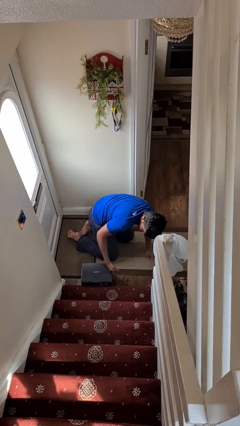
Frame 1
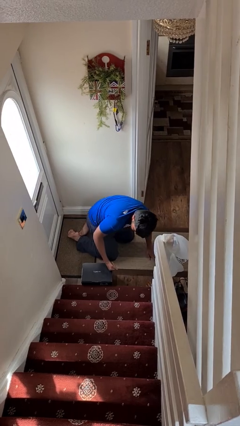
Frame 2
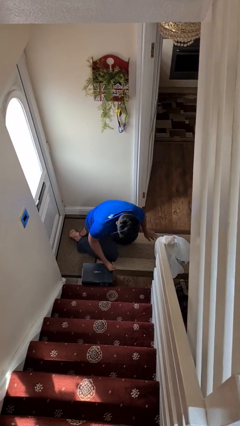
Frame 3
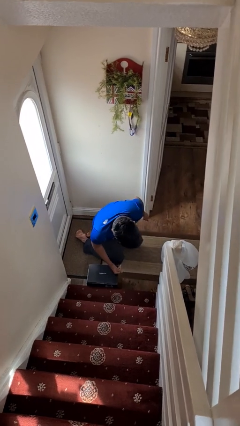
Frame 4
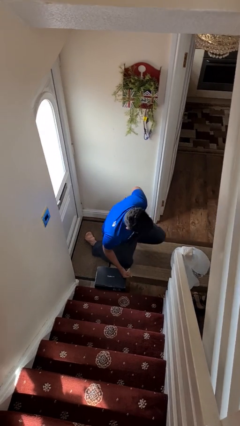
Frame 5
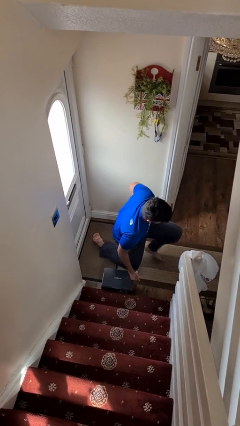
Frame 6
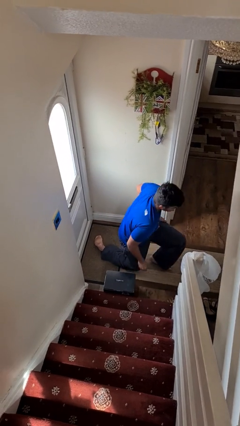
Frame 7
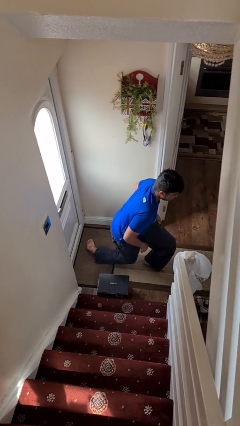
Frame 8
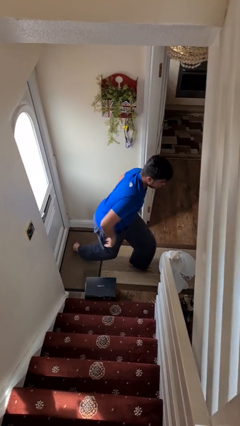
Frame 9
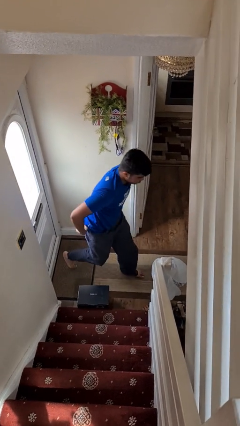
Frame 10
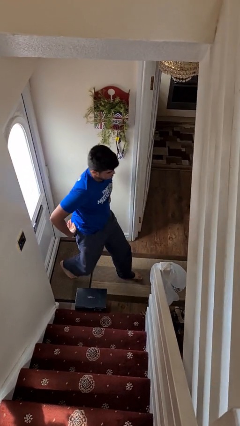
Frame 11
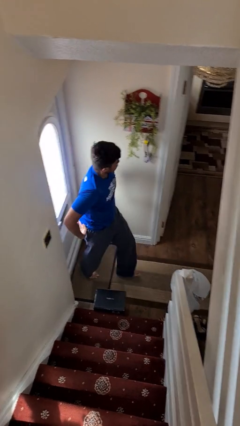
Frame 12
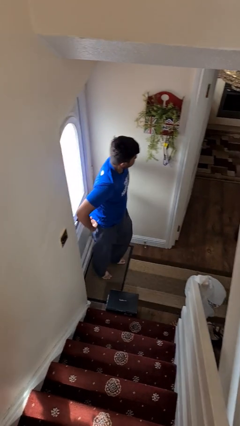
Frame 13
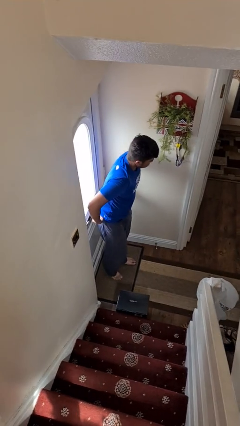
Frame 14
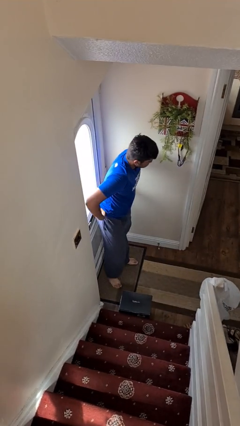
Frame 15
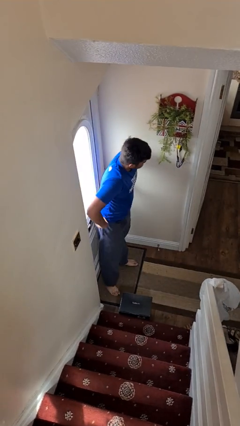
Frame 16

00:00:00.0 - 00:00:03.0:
person stands up from floor

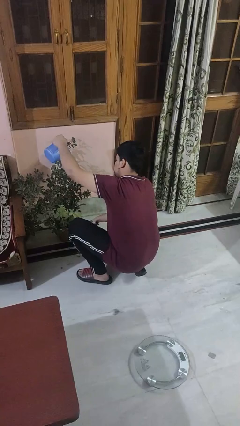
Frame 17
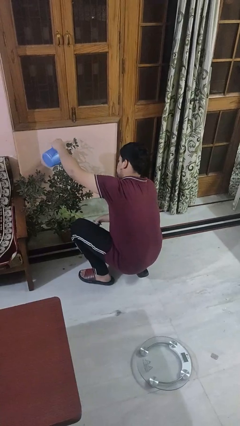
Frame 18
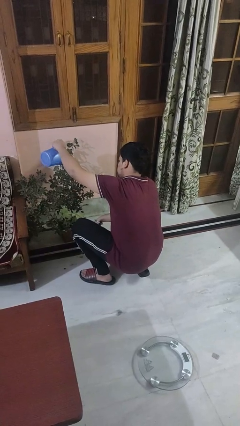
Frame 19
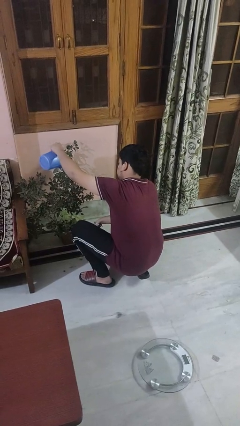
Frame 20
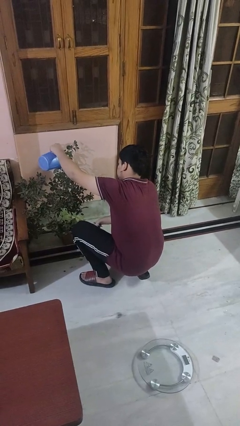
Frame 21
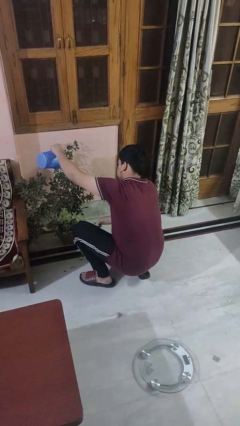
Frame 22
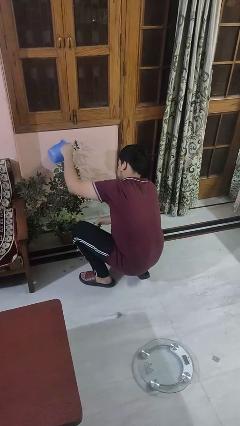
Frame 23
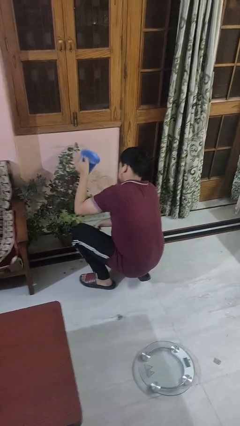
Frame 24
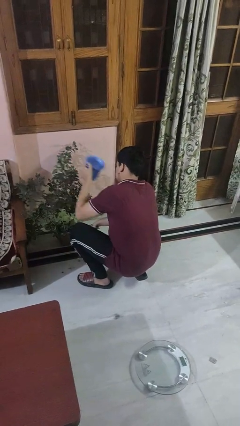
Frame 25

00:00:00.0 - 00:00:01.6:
person waters houseplant

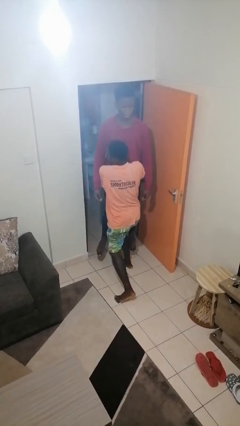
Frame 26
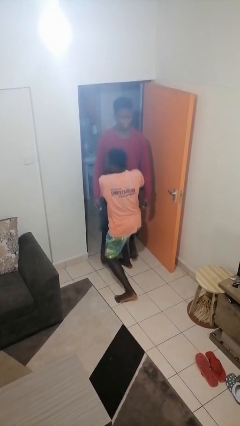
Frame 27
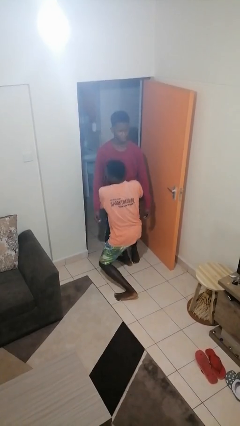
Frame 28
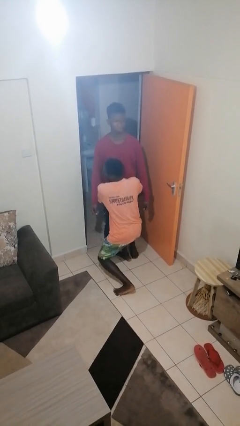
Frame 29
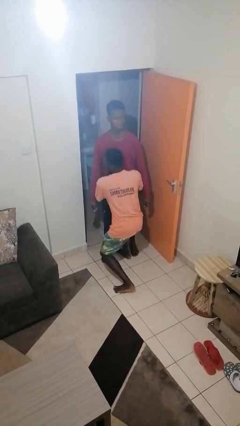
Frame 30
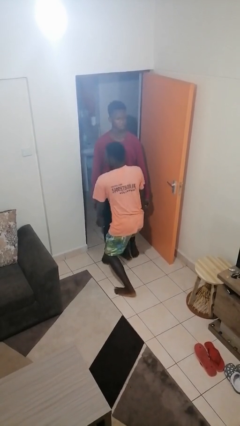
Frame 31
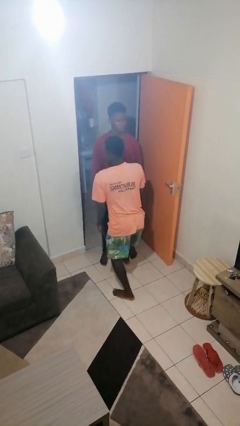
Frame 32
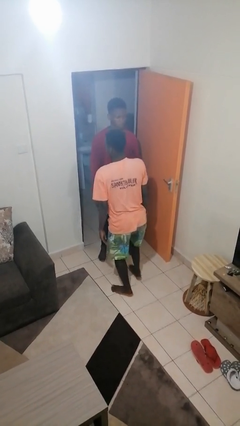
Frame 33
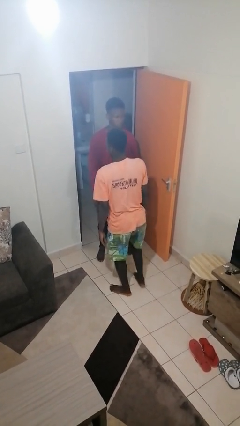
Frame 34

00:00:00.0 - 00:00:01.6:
person puts down person

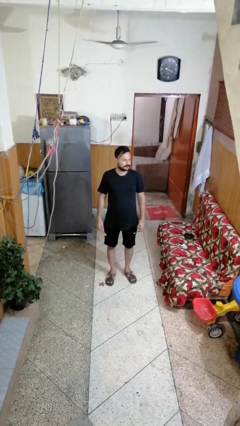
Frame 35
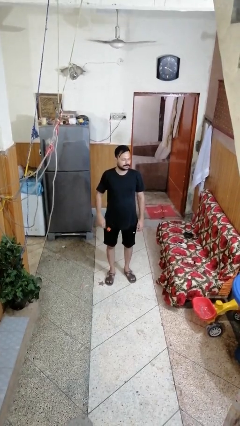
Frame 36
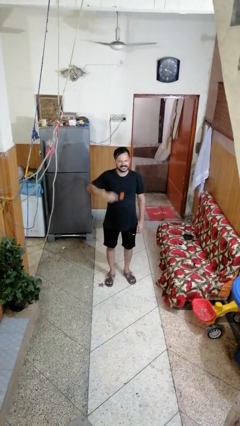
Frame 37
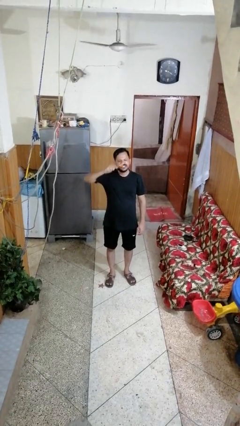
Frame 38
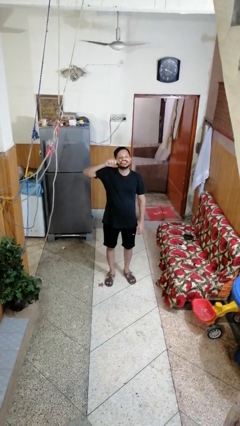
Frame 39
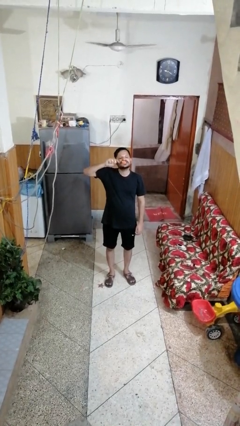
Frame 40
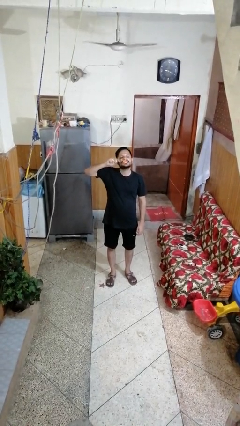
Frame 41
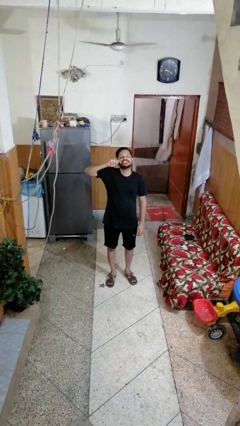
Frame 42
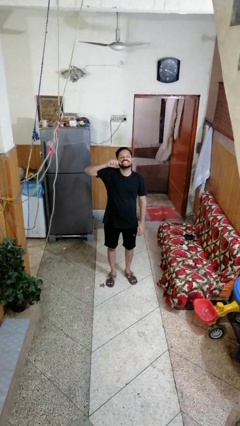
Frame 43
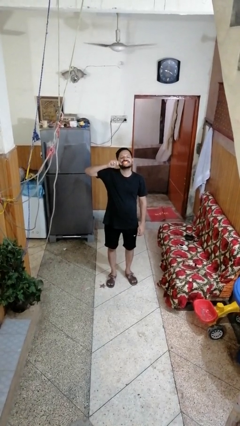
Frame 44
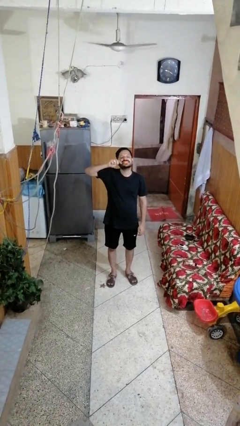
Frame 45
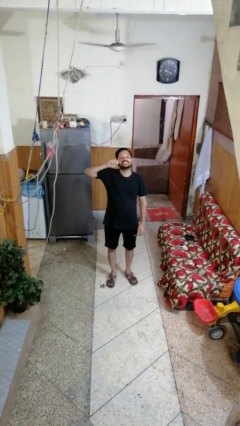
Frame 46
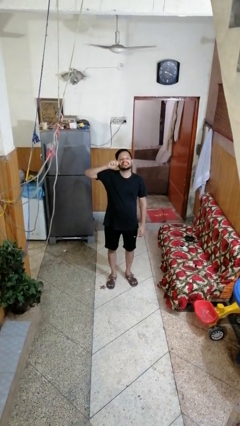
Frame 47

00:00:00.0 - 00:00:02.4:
person brushes teeth

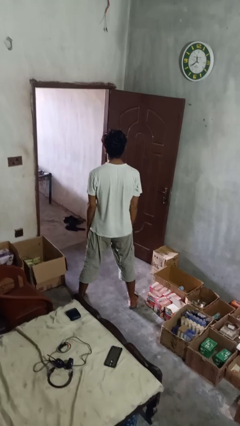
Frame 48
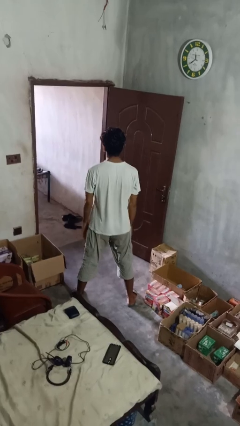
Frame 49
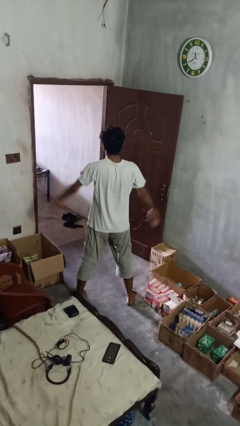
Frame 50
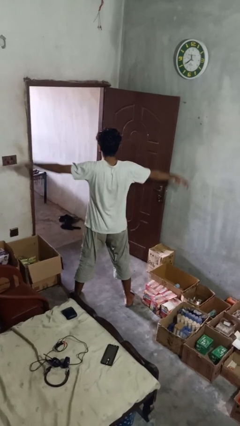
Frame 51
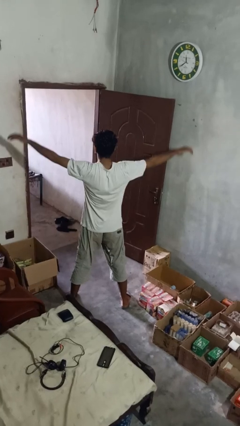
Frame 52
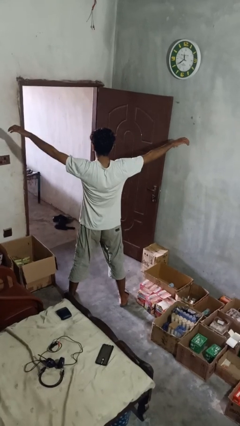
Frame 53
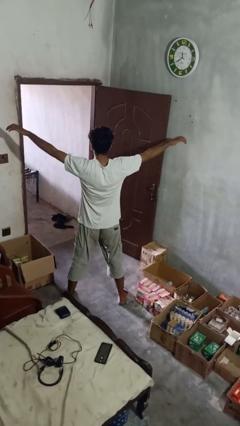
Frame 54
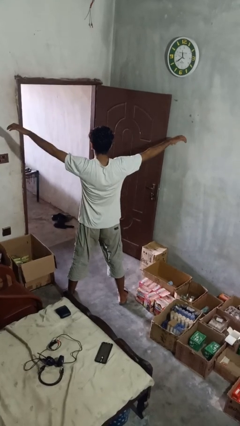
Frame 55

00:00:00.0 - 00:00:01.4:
person stretches arms to side

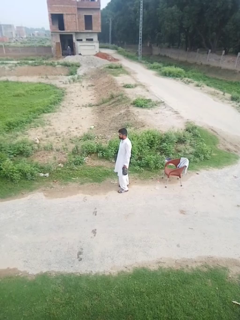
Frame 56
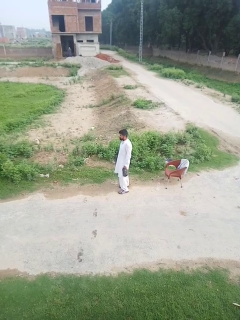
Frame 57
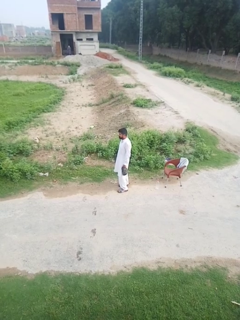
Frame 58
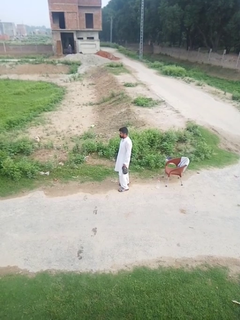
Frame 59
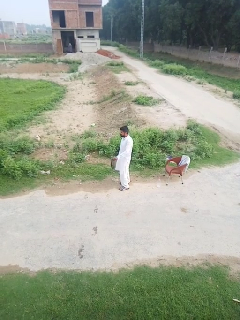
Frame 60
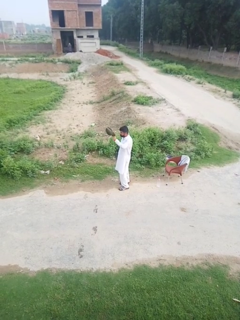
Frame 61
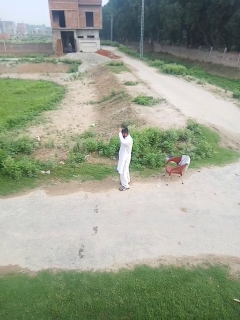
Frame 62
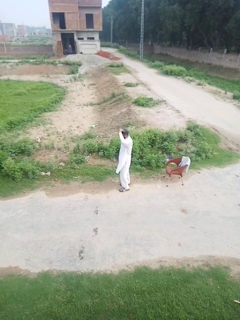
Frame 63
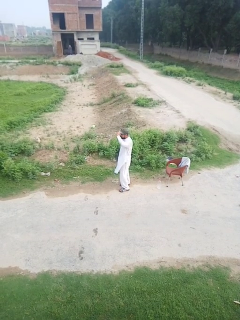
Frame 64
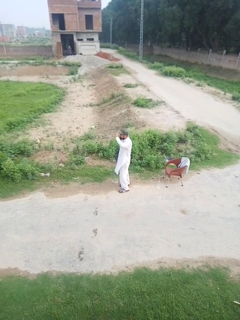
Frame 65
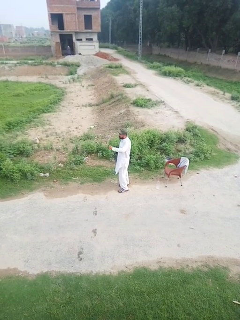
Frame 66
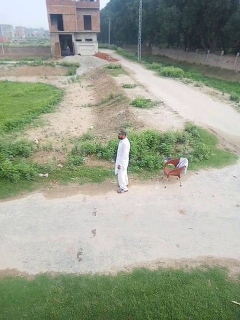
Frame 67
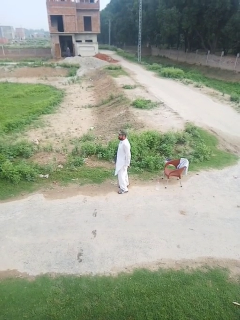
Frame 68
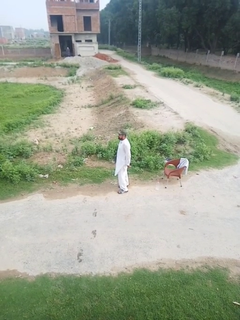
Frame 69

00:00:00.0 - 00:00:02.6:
person puts on hat

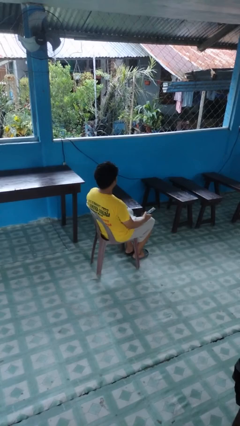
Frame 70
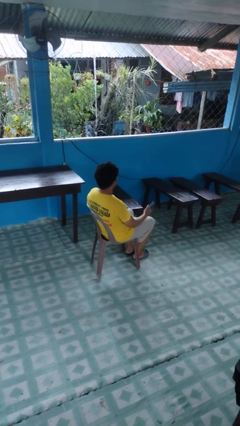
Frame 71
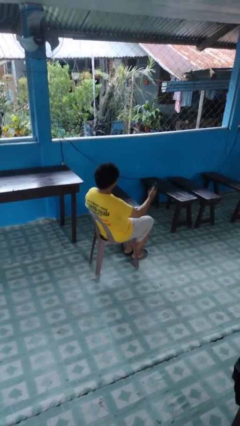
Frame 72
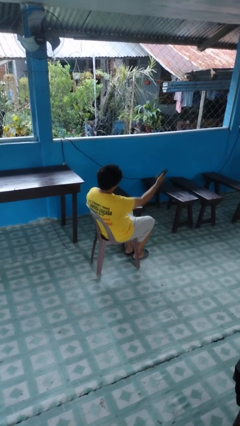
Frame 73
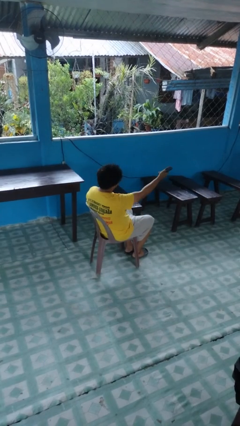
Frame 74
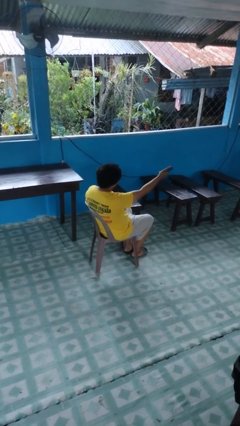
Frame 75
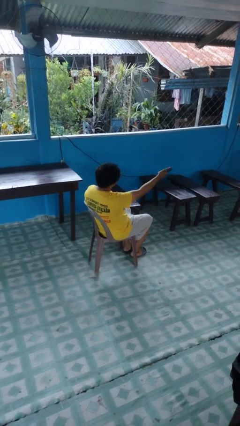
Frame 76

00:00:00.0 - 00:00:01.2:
person uses television remote

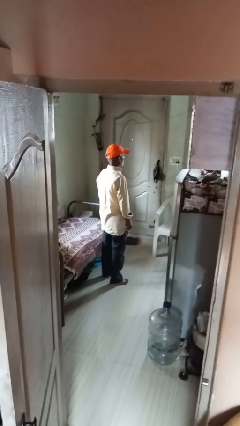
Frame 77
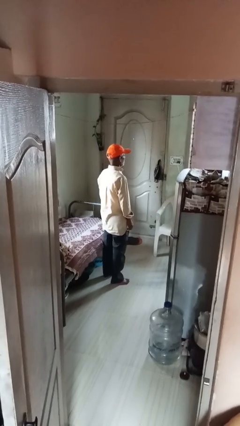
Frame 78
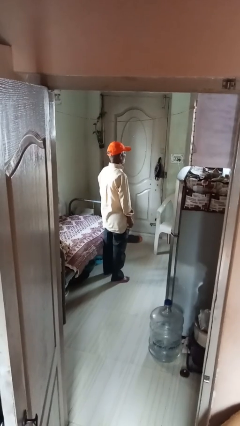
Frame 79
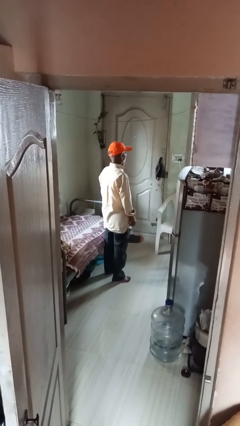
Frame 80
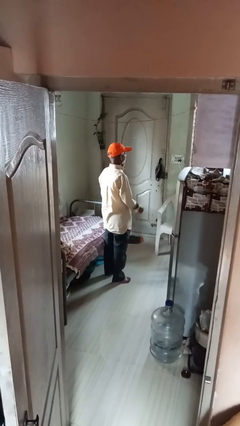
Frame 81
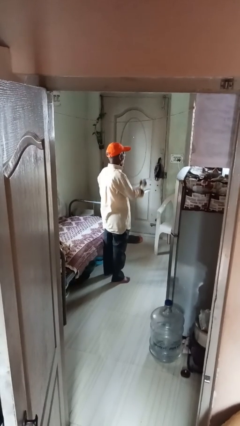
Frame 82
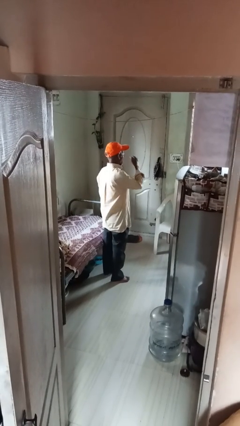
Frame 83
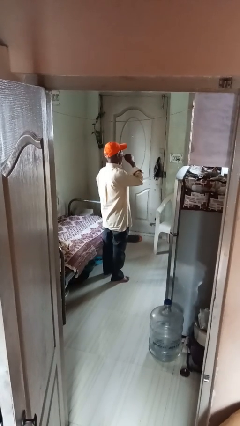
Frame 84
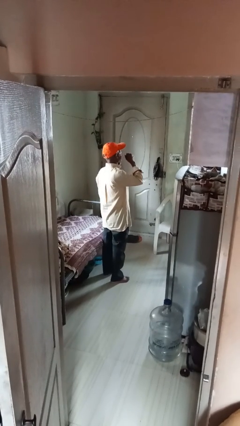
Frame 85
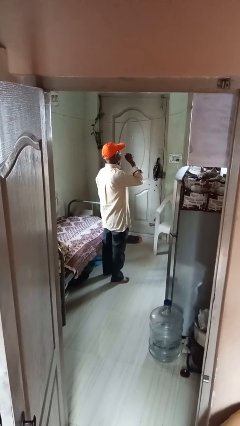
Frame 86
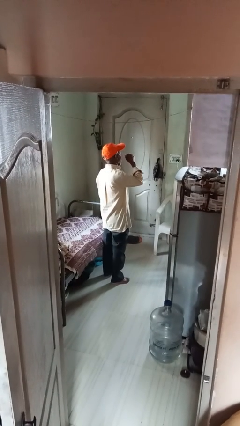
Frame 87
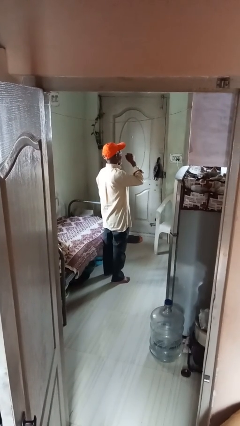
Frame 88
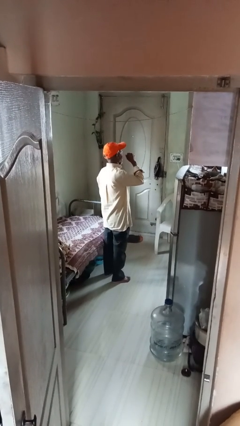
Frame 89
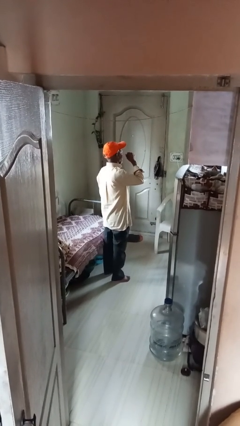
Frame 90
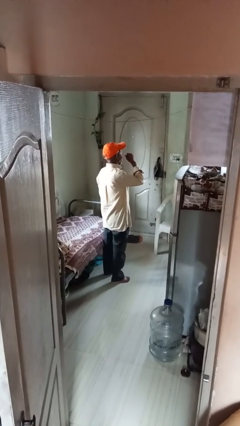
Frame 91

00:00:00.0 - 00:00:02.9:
person yawns

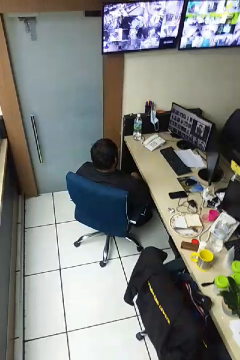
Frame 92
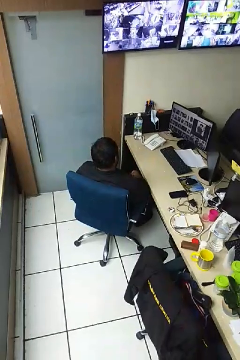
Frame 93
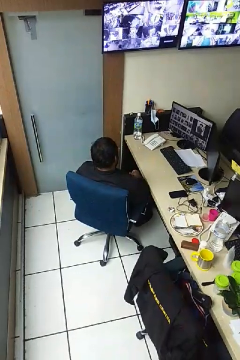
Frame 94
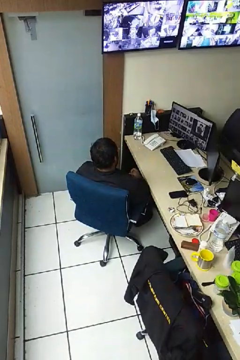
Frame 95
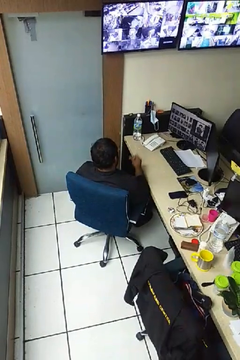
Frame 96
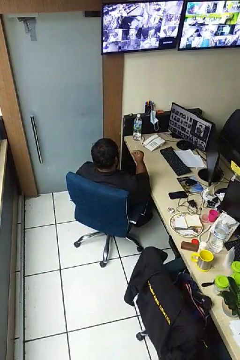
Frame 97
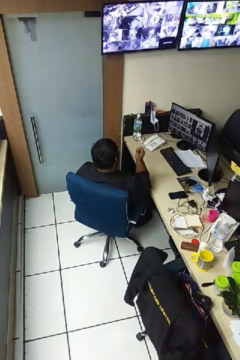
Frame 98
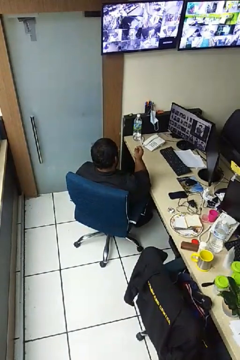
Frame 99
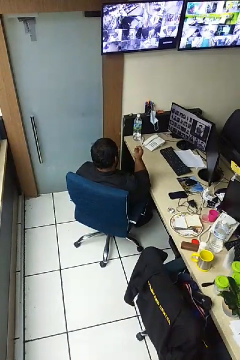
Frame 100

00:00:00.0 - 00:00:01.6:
person snaps fingers
